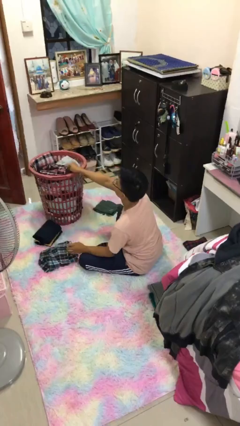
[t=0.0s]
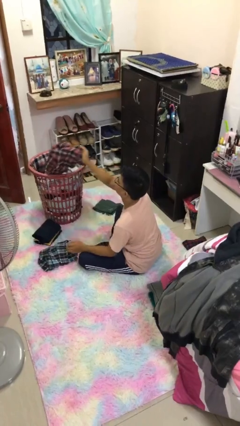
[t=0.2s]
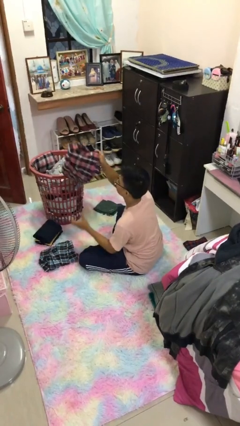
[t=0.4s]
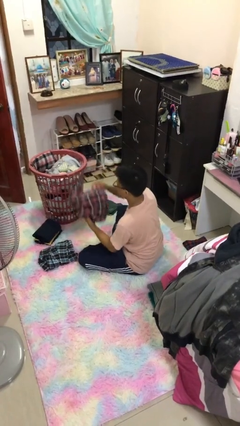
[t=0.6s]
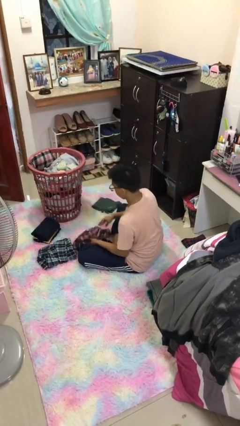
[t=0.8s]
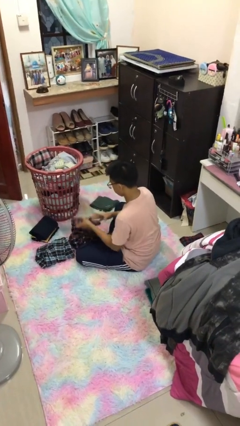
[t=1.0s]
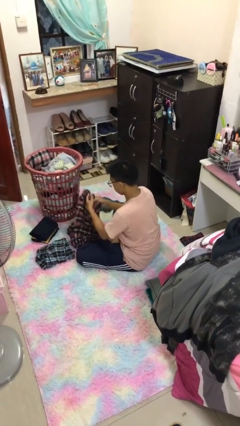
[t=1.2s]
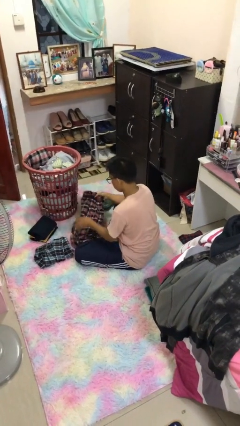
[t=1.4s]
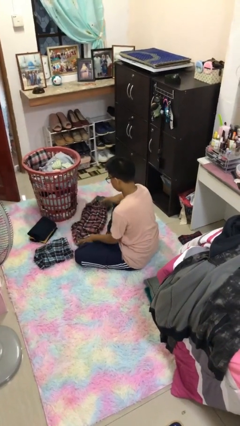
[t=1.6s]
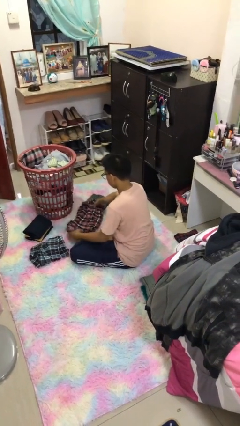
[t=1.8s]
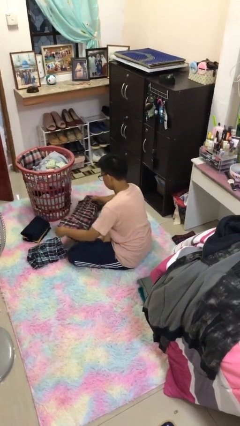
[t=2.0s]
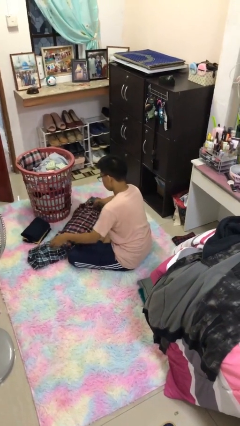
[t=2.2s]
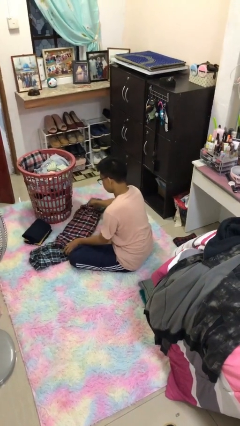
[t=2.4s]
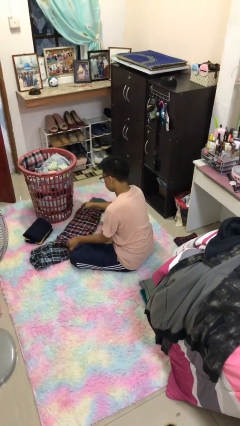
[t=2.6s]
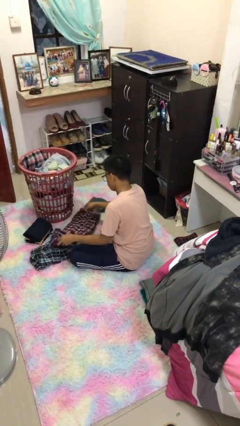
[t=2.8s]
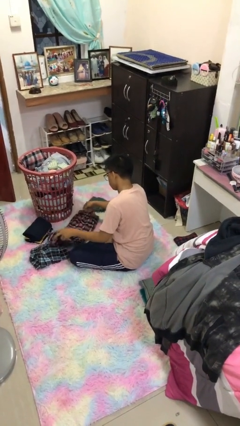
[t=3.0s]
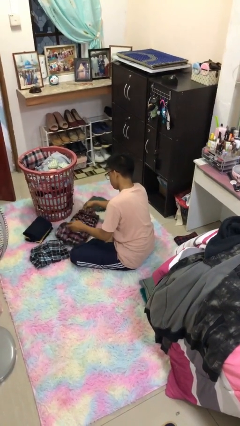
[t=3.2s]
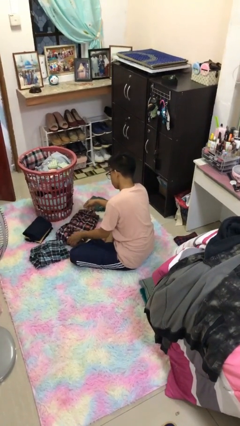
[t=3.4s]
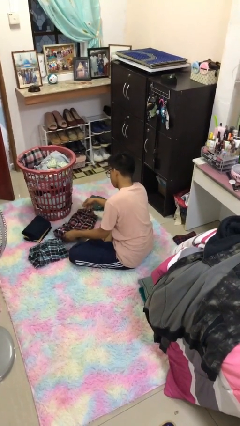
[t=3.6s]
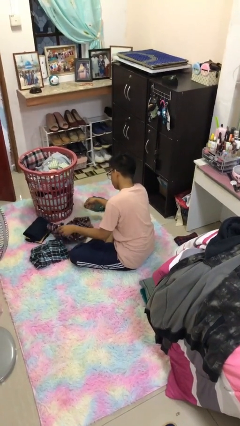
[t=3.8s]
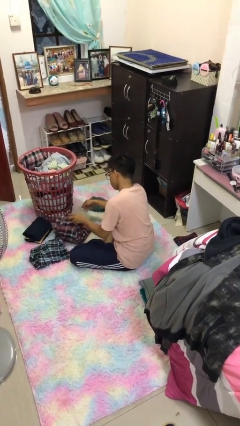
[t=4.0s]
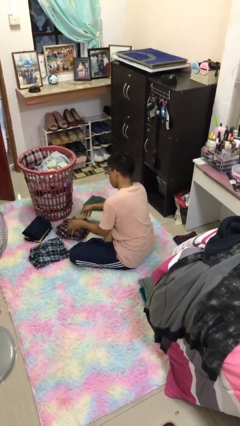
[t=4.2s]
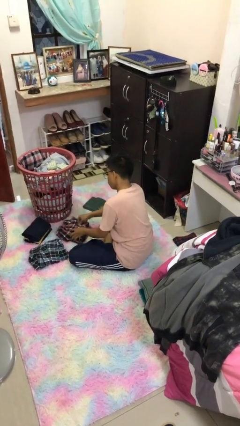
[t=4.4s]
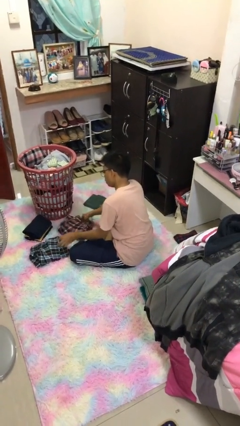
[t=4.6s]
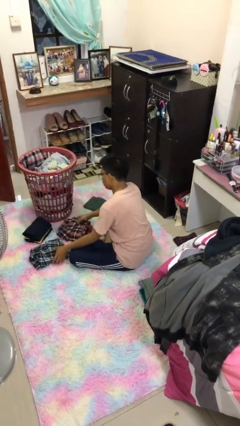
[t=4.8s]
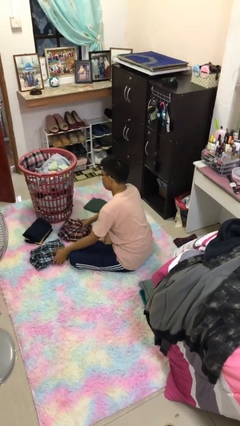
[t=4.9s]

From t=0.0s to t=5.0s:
person folds pants

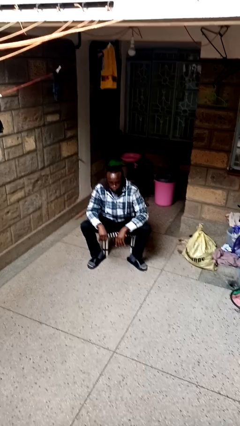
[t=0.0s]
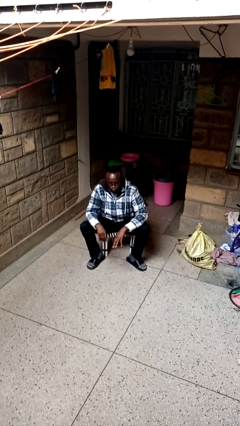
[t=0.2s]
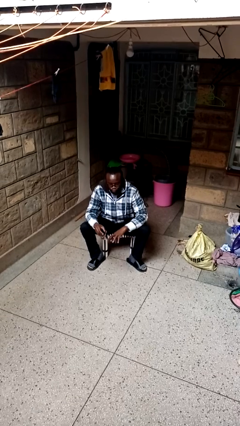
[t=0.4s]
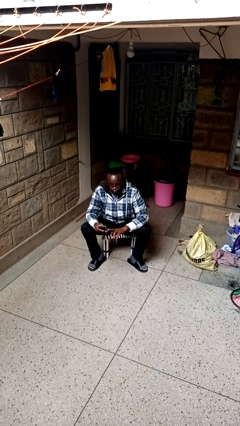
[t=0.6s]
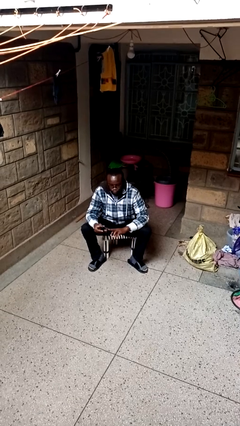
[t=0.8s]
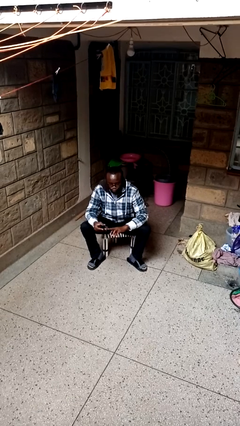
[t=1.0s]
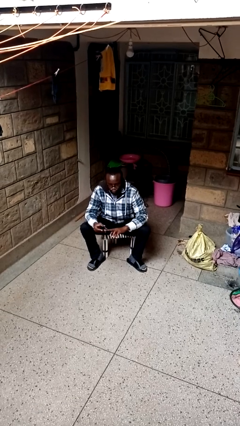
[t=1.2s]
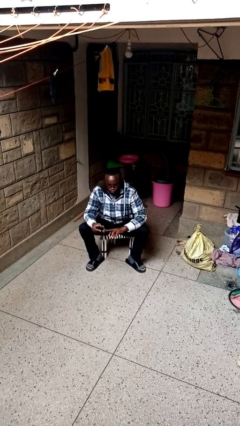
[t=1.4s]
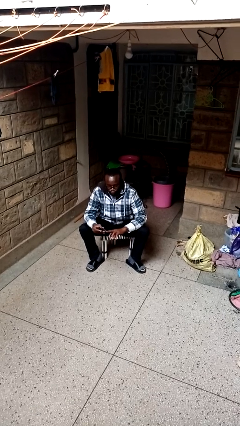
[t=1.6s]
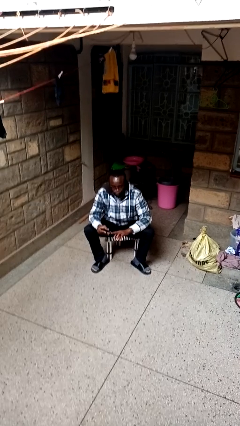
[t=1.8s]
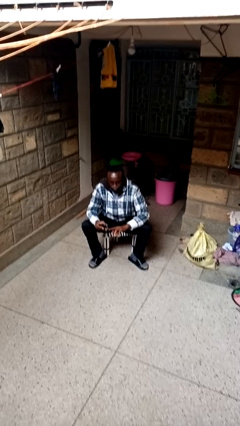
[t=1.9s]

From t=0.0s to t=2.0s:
person clips fingernails

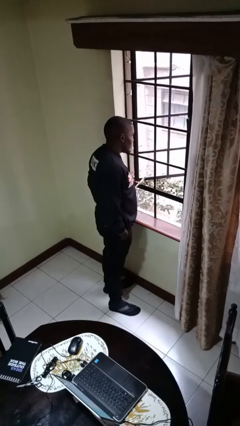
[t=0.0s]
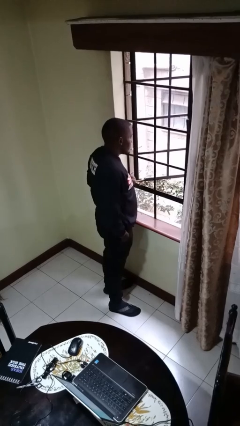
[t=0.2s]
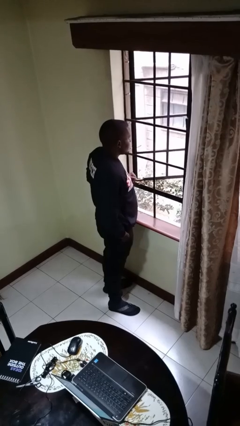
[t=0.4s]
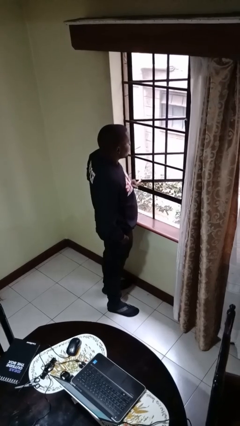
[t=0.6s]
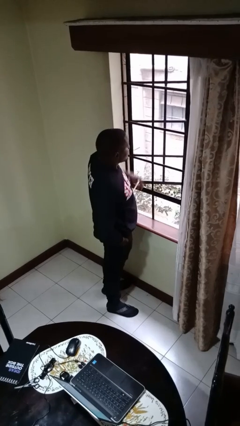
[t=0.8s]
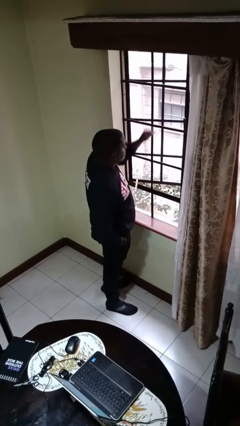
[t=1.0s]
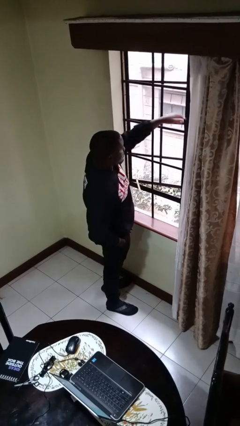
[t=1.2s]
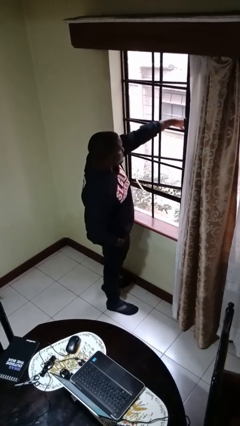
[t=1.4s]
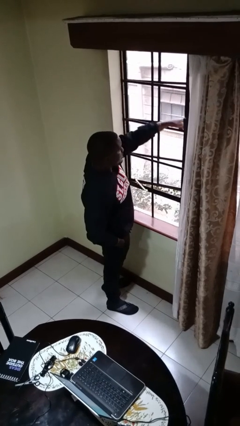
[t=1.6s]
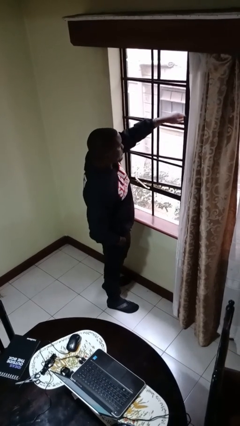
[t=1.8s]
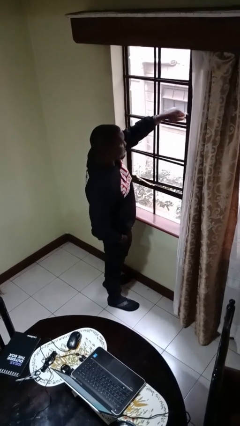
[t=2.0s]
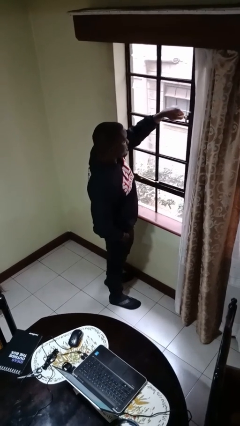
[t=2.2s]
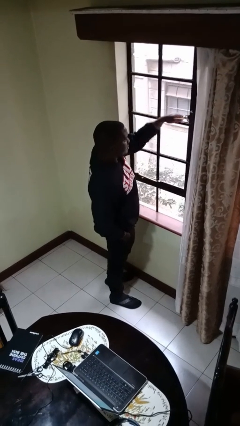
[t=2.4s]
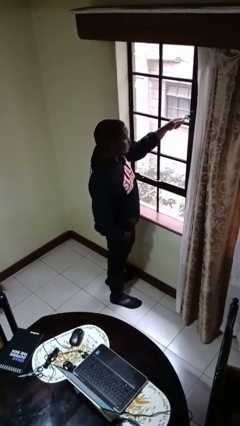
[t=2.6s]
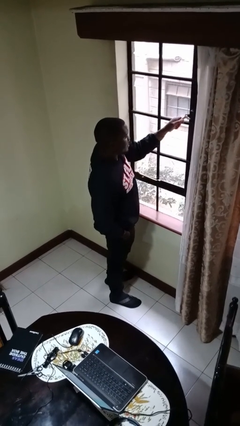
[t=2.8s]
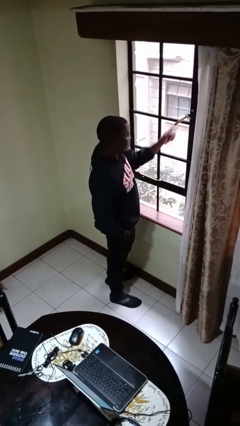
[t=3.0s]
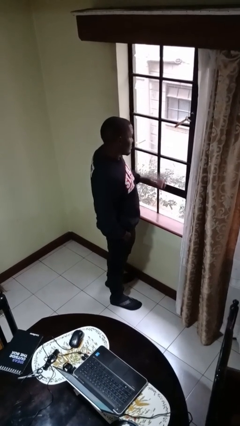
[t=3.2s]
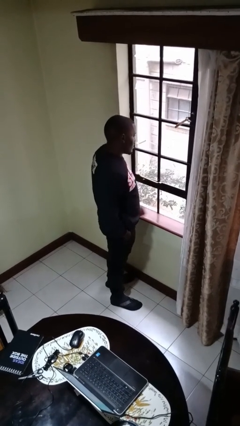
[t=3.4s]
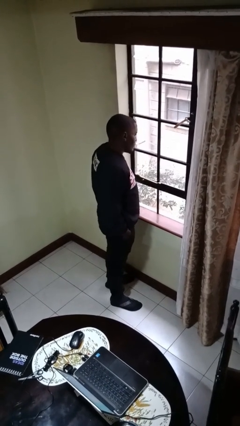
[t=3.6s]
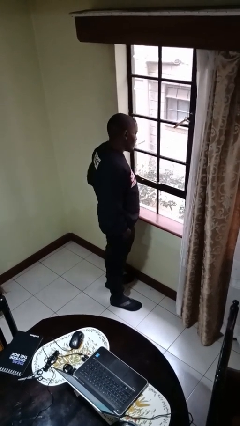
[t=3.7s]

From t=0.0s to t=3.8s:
person closes home window

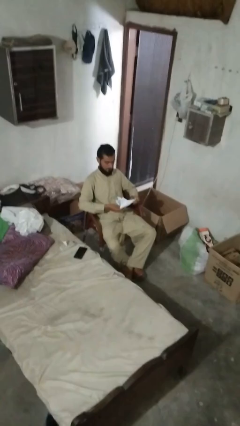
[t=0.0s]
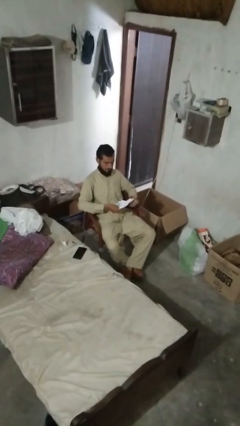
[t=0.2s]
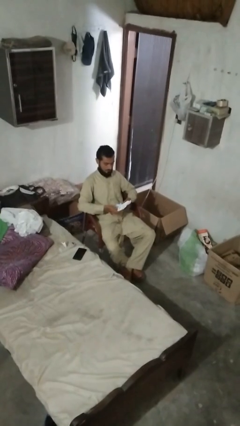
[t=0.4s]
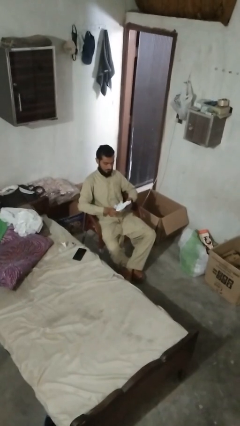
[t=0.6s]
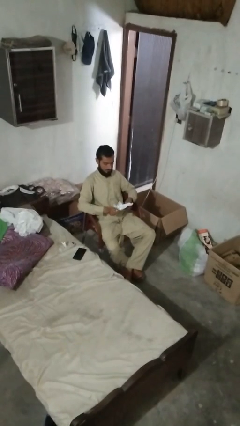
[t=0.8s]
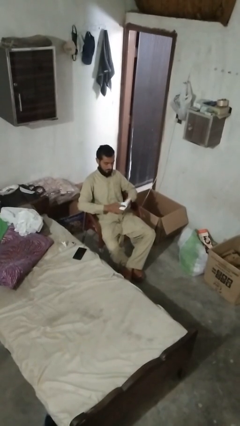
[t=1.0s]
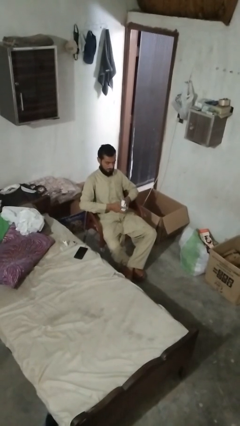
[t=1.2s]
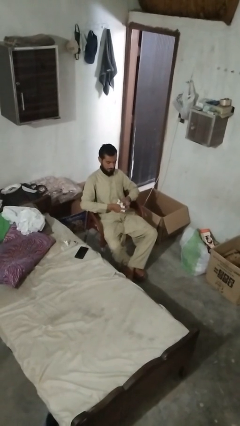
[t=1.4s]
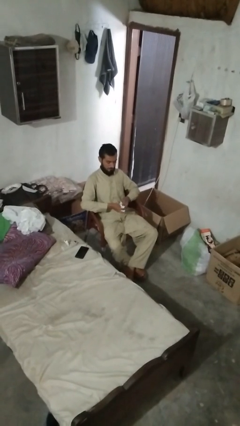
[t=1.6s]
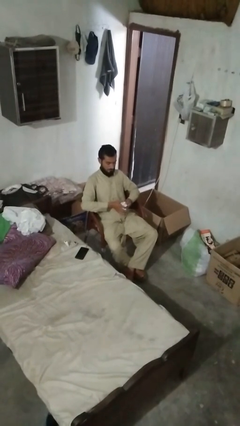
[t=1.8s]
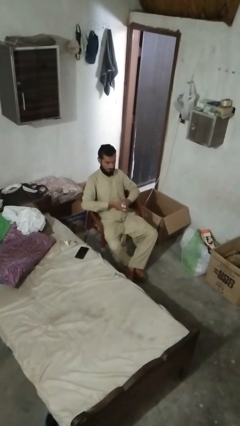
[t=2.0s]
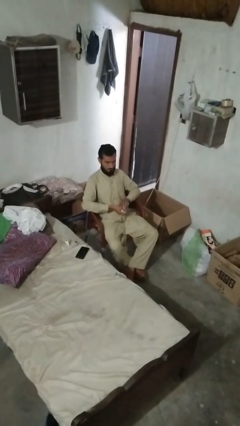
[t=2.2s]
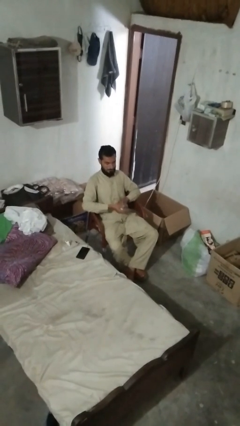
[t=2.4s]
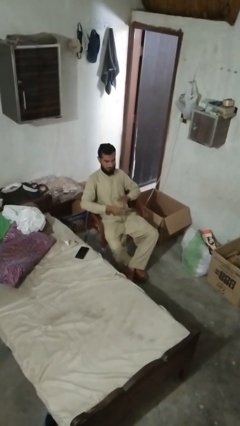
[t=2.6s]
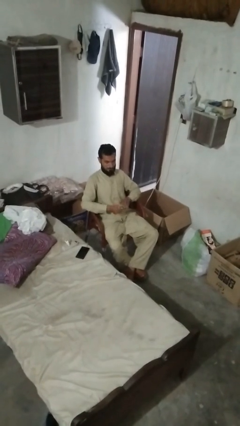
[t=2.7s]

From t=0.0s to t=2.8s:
person crumples paper

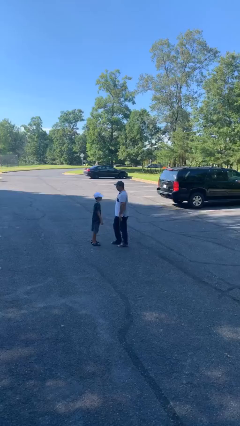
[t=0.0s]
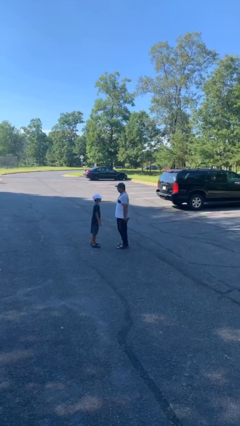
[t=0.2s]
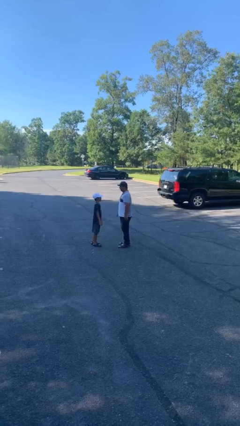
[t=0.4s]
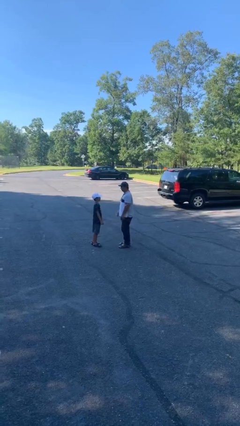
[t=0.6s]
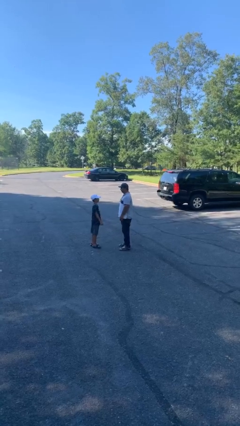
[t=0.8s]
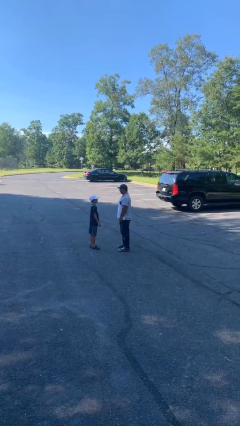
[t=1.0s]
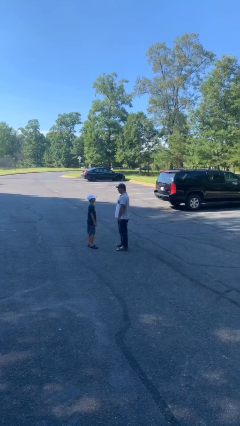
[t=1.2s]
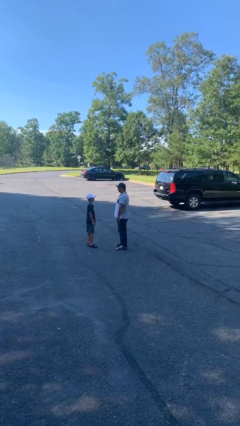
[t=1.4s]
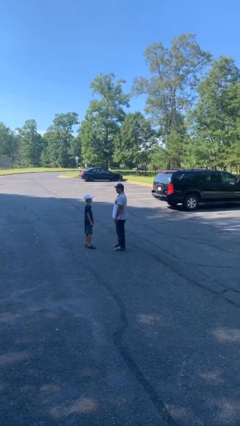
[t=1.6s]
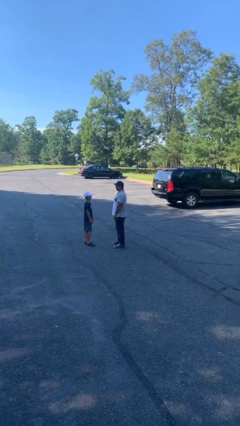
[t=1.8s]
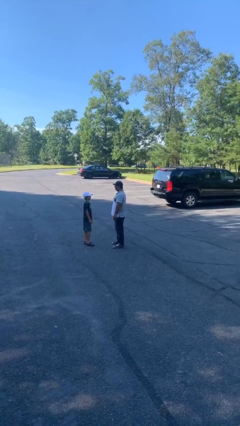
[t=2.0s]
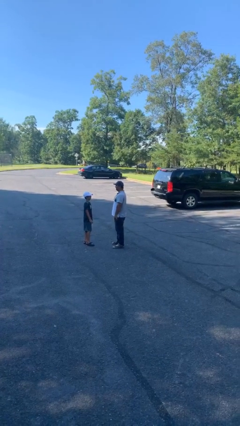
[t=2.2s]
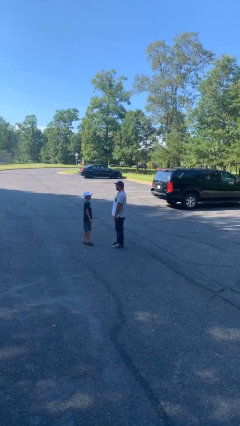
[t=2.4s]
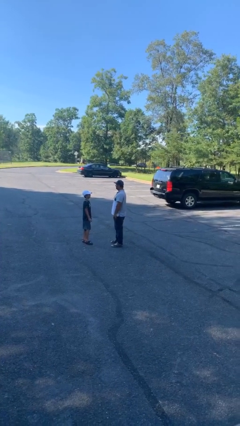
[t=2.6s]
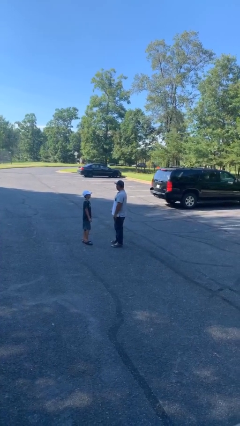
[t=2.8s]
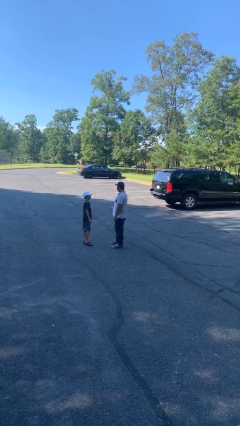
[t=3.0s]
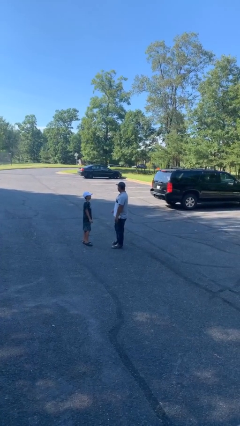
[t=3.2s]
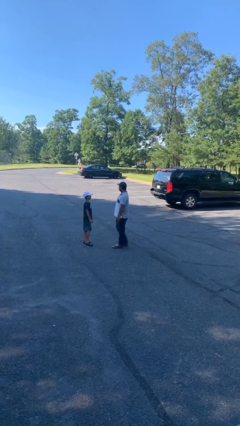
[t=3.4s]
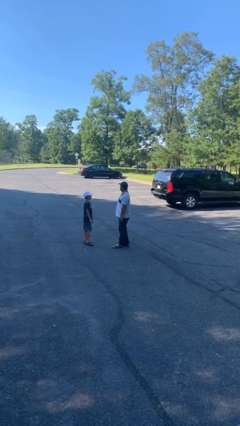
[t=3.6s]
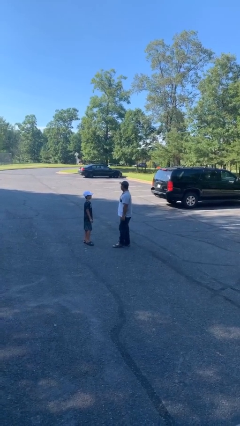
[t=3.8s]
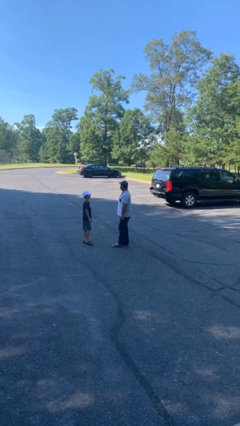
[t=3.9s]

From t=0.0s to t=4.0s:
person talks to person
